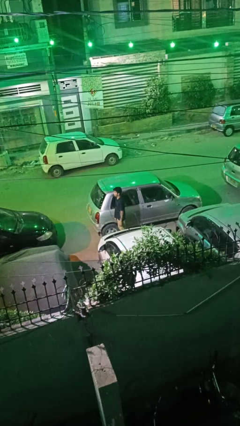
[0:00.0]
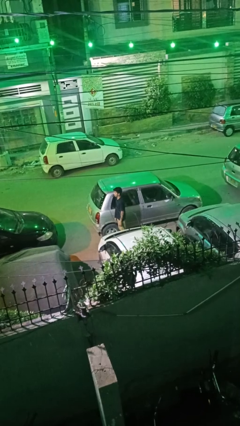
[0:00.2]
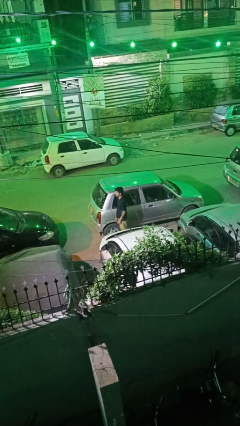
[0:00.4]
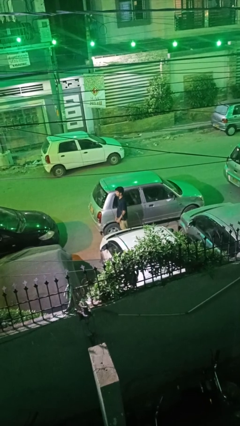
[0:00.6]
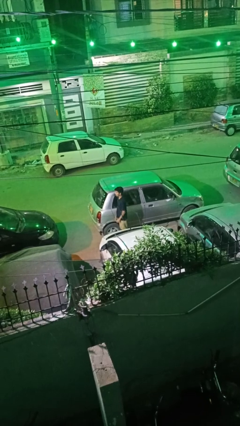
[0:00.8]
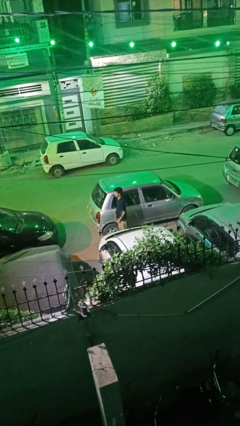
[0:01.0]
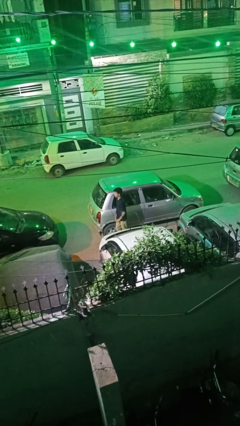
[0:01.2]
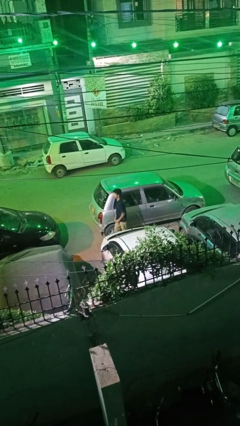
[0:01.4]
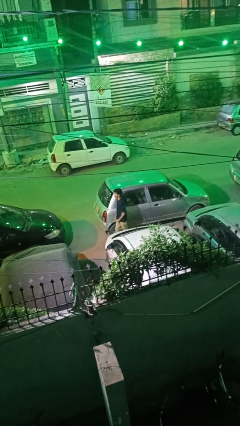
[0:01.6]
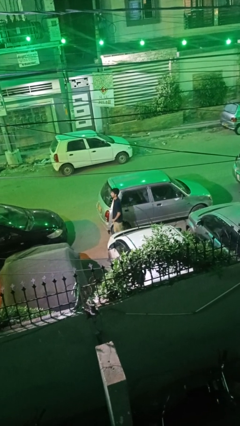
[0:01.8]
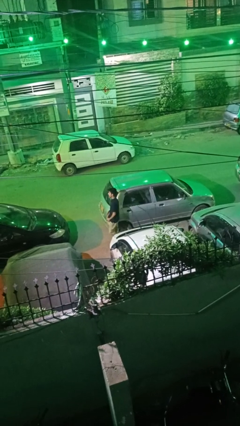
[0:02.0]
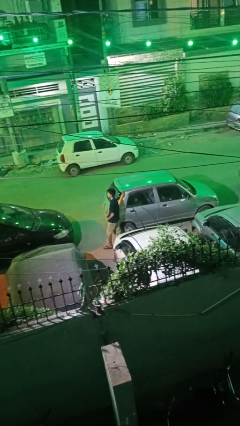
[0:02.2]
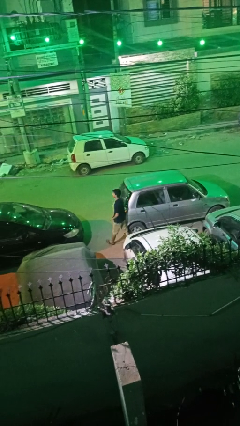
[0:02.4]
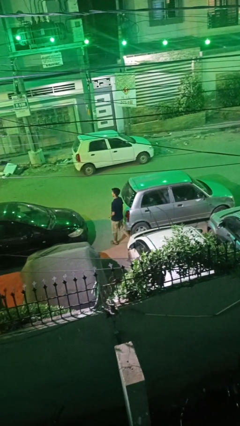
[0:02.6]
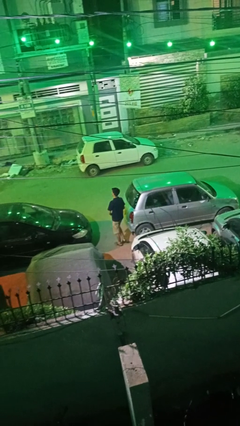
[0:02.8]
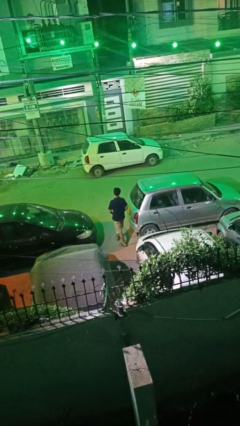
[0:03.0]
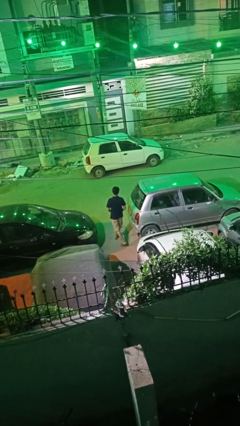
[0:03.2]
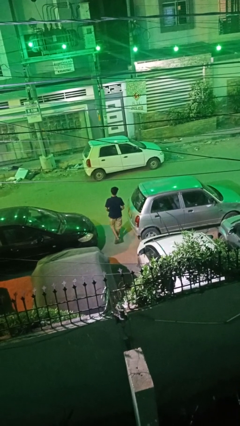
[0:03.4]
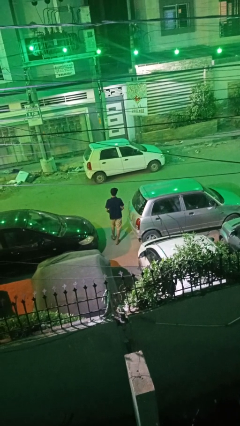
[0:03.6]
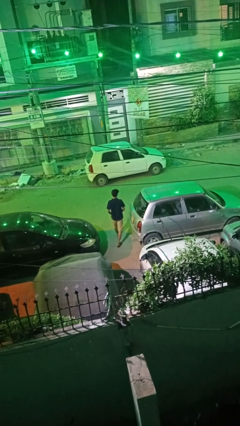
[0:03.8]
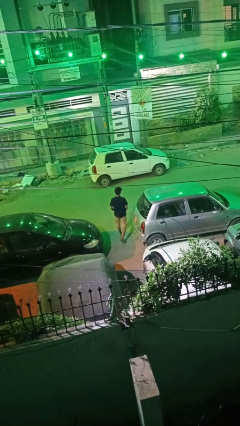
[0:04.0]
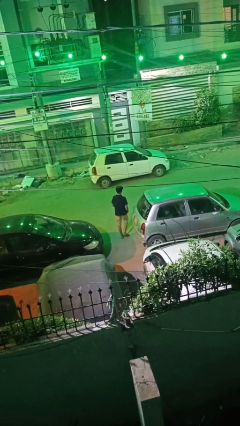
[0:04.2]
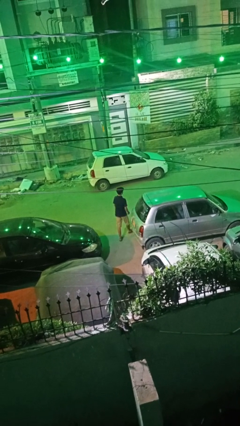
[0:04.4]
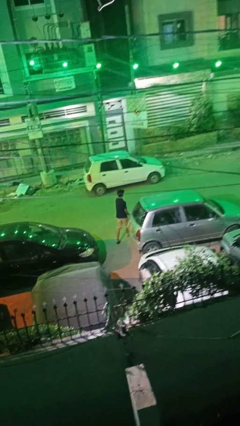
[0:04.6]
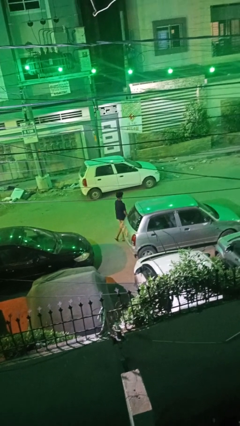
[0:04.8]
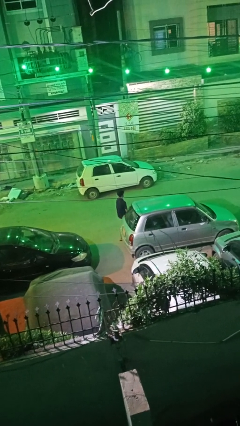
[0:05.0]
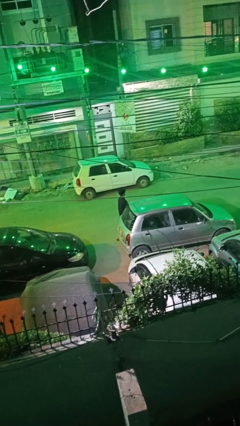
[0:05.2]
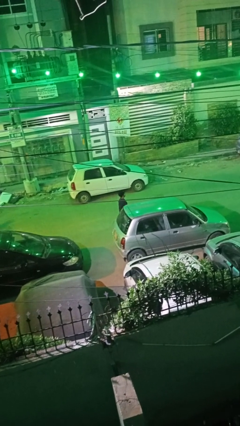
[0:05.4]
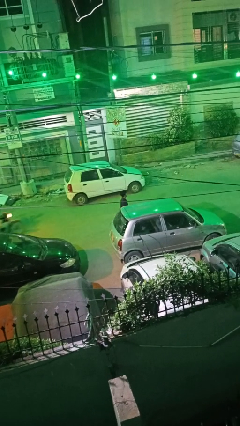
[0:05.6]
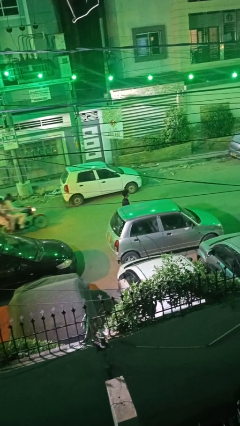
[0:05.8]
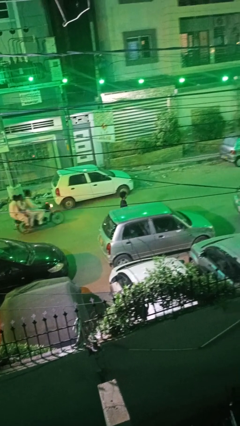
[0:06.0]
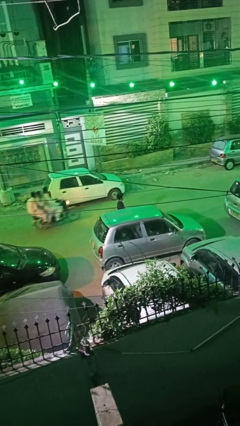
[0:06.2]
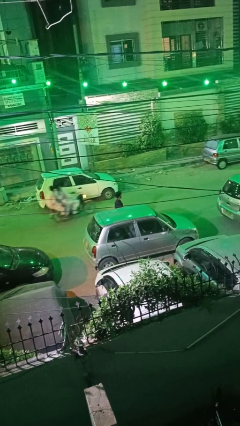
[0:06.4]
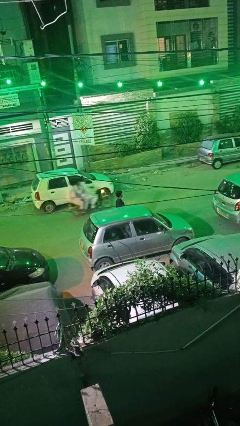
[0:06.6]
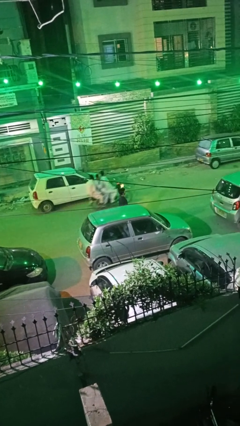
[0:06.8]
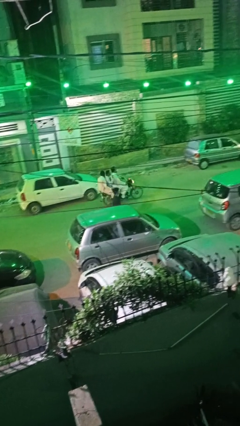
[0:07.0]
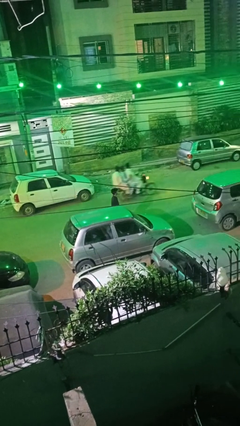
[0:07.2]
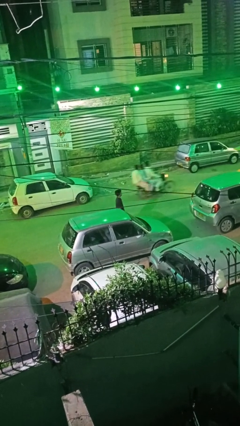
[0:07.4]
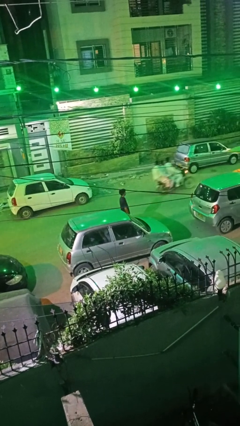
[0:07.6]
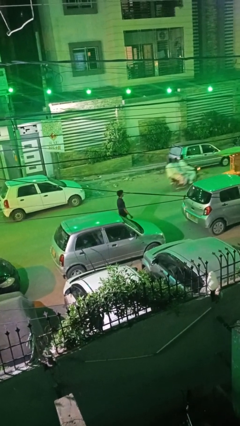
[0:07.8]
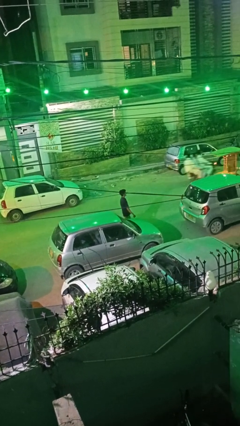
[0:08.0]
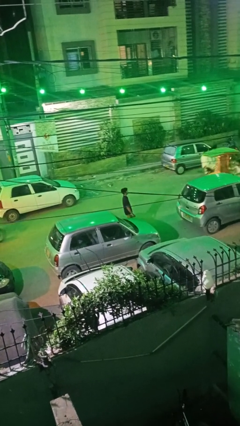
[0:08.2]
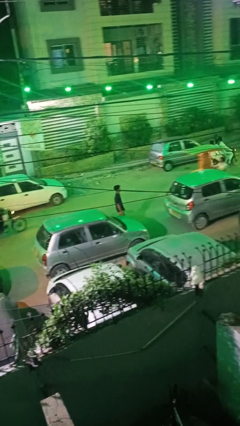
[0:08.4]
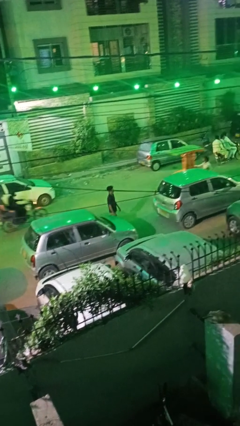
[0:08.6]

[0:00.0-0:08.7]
person walks around car

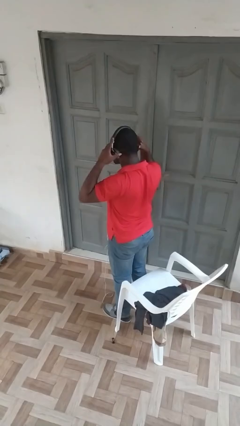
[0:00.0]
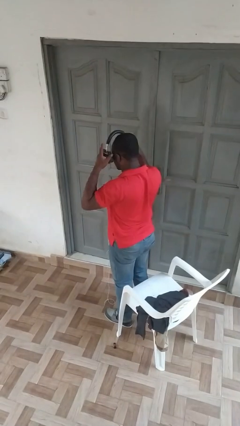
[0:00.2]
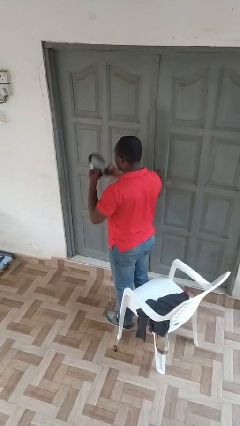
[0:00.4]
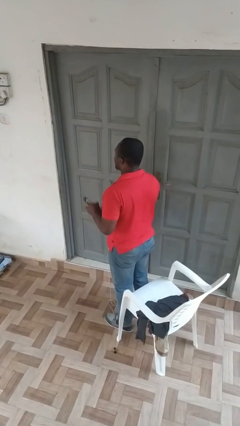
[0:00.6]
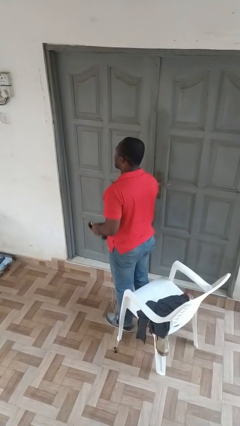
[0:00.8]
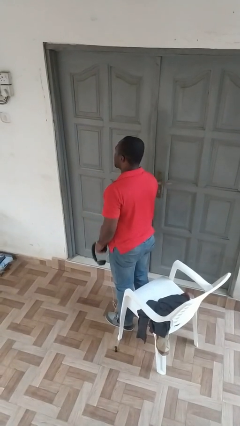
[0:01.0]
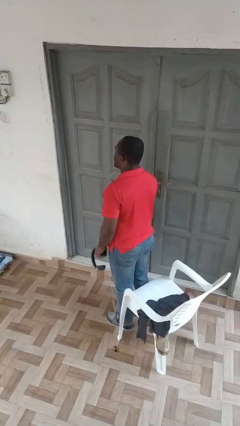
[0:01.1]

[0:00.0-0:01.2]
person takes off headphones

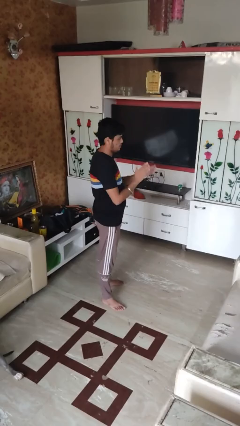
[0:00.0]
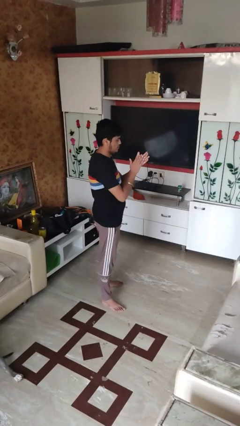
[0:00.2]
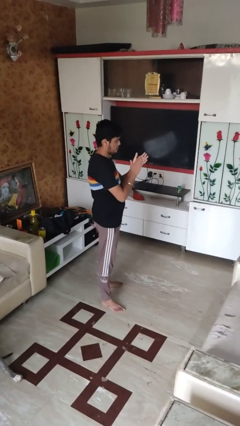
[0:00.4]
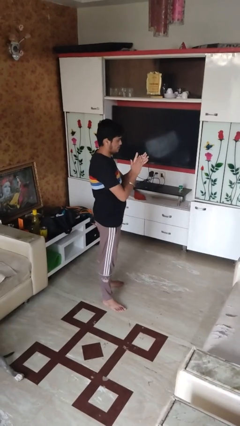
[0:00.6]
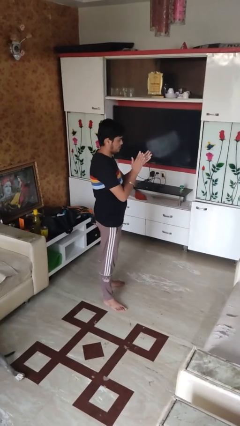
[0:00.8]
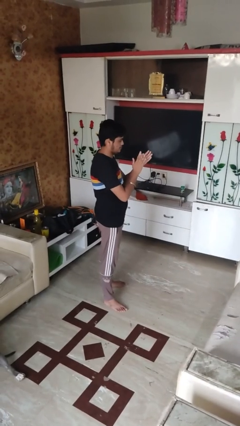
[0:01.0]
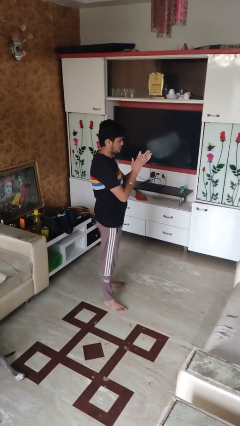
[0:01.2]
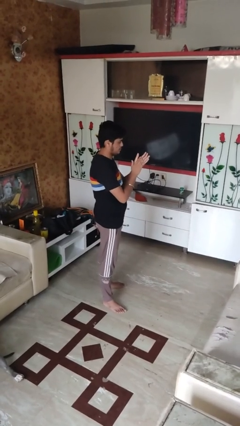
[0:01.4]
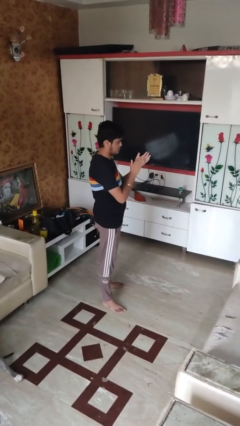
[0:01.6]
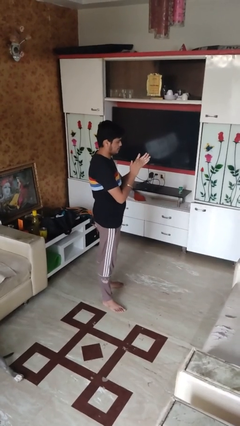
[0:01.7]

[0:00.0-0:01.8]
person claps hands

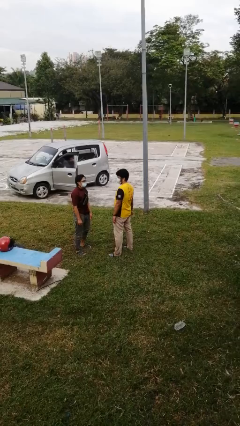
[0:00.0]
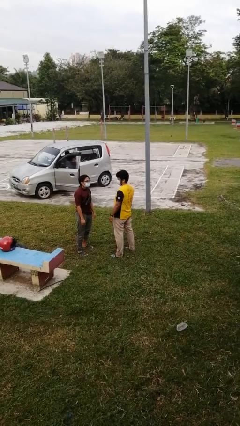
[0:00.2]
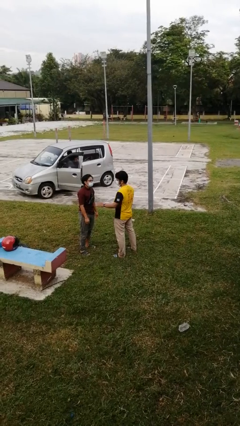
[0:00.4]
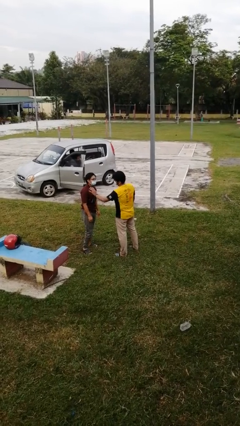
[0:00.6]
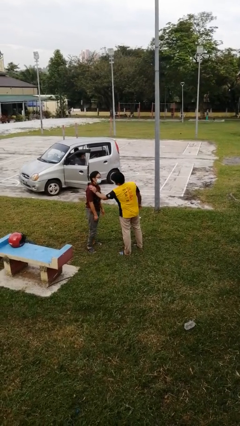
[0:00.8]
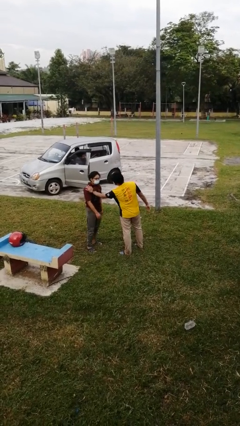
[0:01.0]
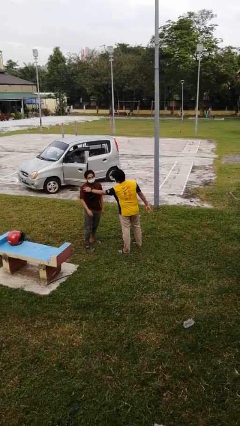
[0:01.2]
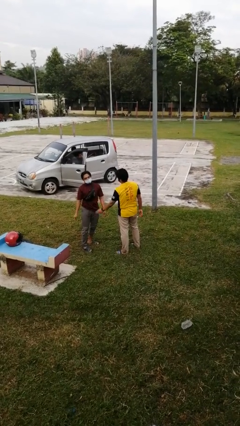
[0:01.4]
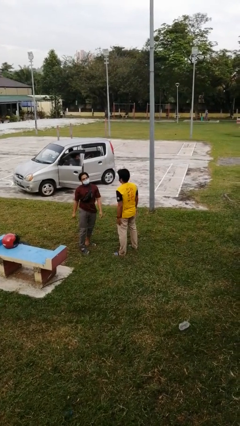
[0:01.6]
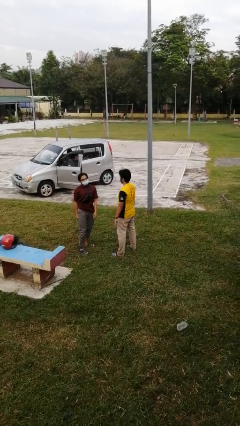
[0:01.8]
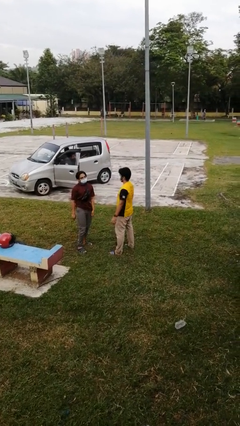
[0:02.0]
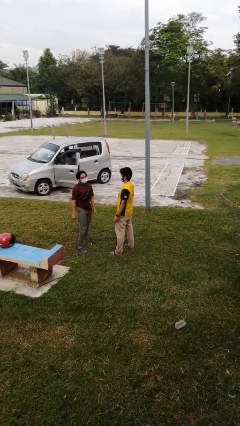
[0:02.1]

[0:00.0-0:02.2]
person shoves person

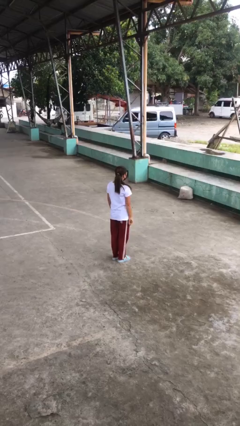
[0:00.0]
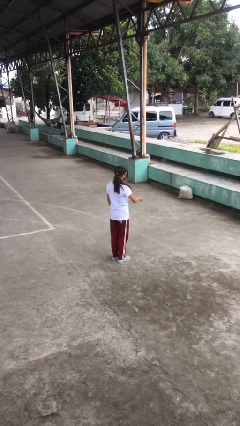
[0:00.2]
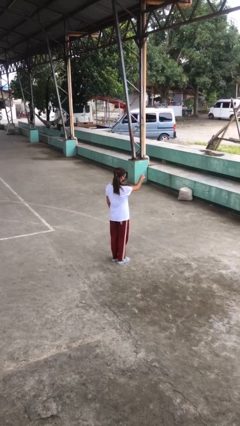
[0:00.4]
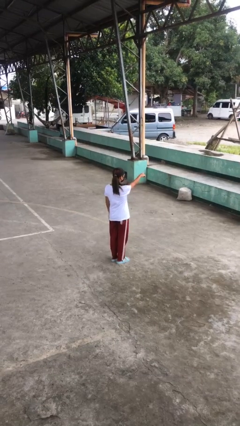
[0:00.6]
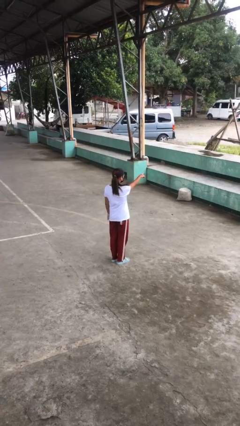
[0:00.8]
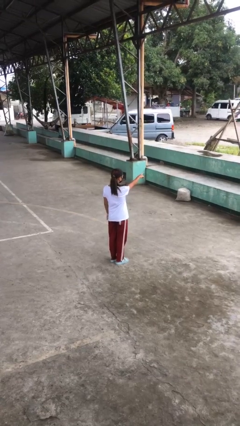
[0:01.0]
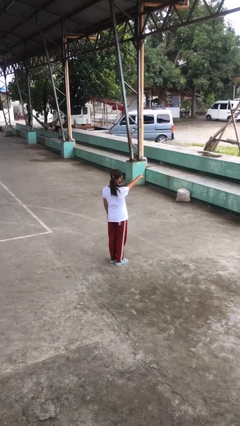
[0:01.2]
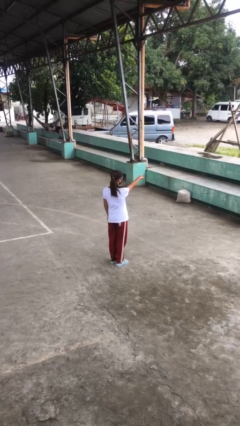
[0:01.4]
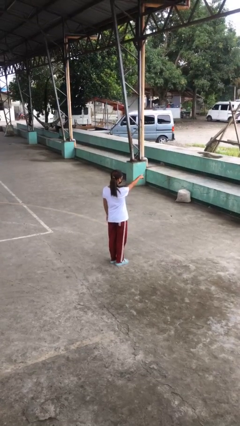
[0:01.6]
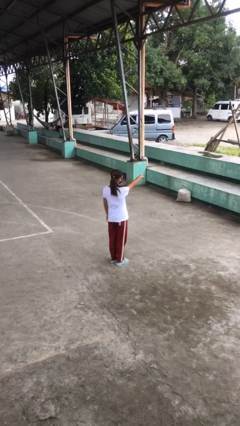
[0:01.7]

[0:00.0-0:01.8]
person points at person

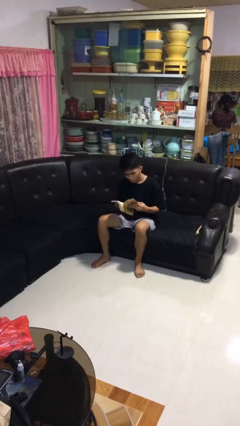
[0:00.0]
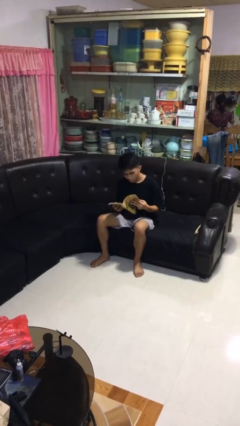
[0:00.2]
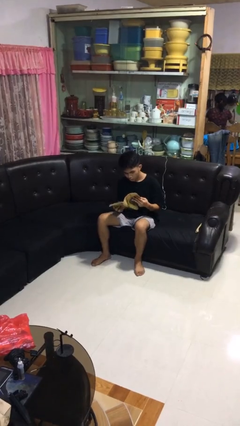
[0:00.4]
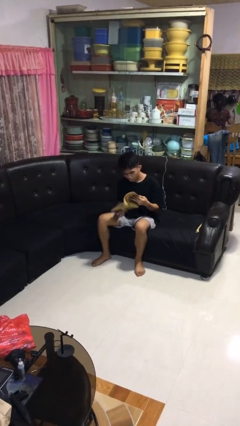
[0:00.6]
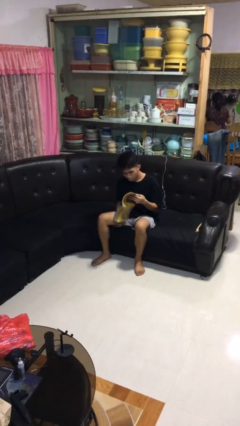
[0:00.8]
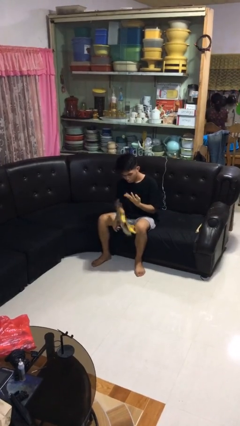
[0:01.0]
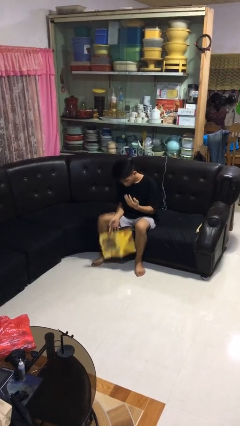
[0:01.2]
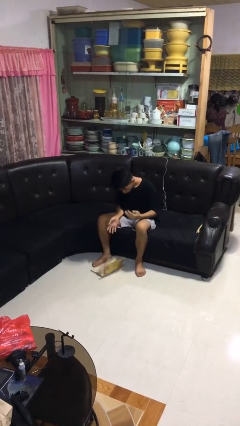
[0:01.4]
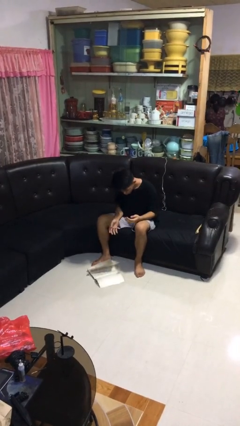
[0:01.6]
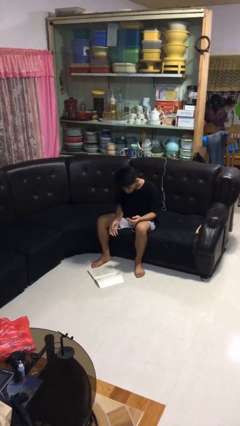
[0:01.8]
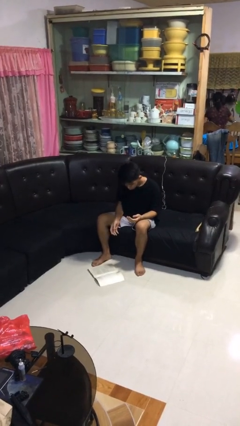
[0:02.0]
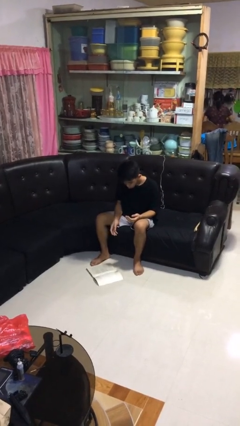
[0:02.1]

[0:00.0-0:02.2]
person drops object
